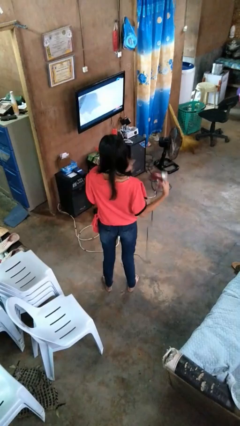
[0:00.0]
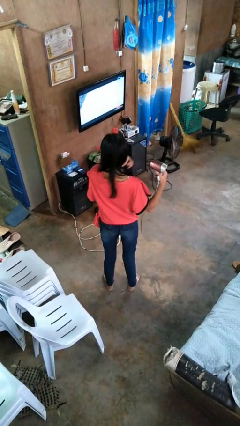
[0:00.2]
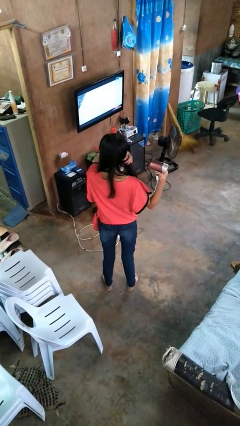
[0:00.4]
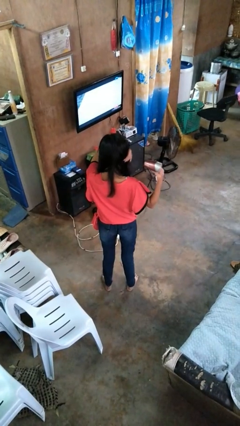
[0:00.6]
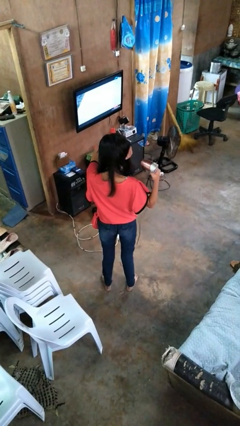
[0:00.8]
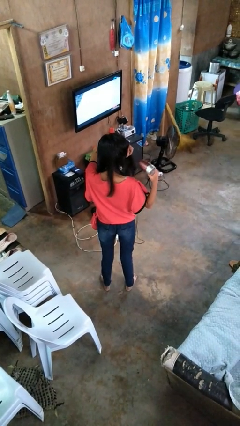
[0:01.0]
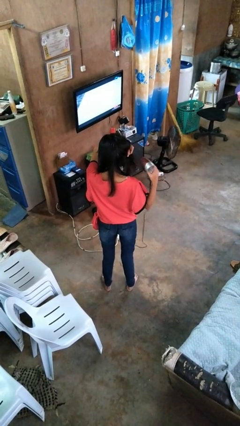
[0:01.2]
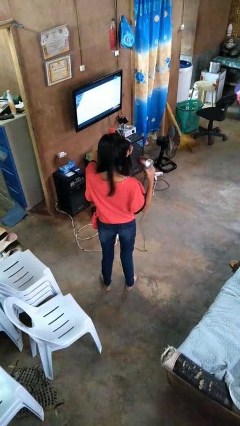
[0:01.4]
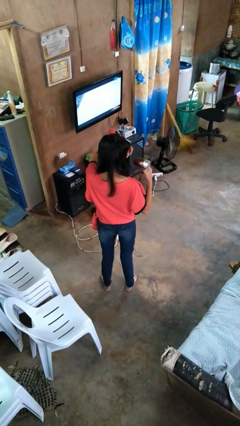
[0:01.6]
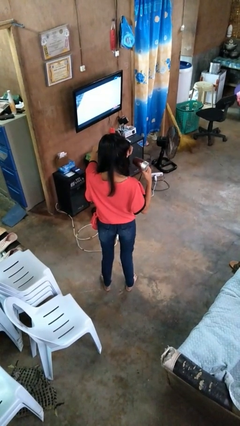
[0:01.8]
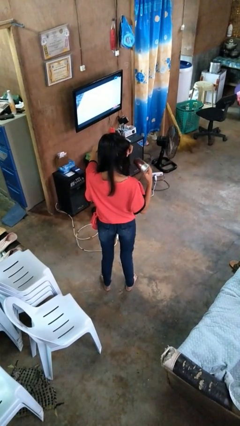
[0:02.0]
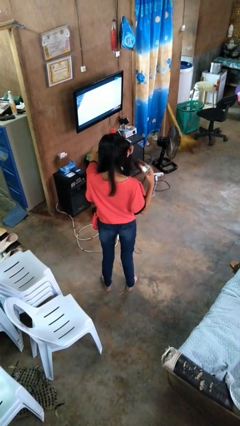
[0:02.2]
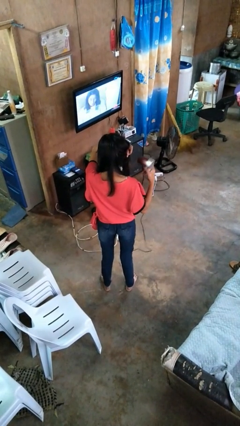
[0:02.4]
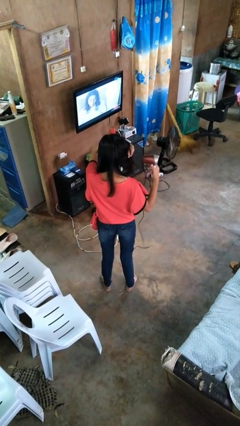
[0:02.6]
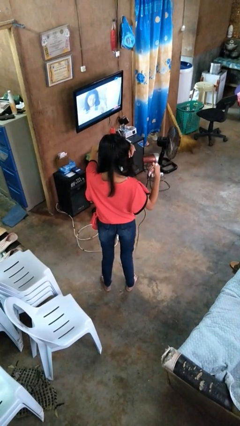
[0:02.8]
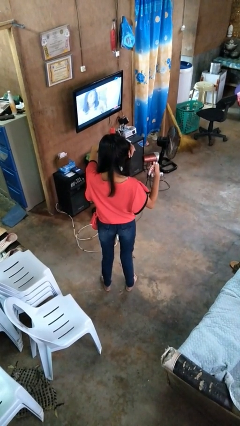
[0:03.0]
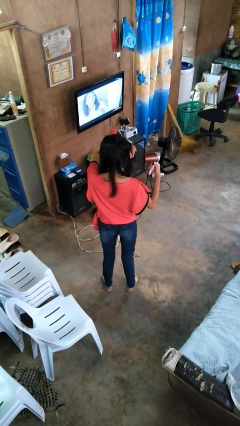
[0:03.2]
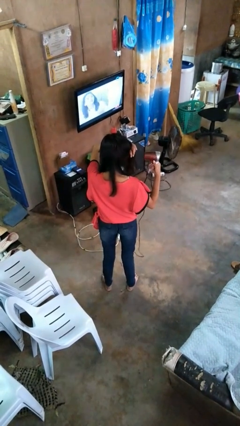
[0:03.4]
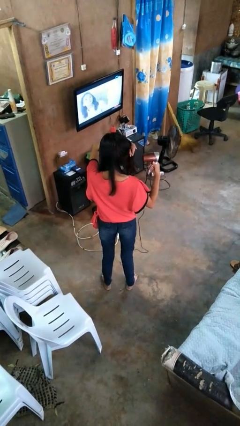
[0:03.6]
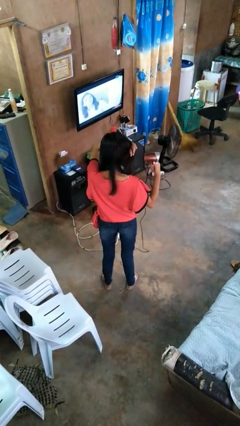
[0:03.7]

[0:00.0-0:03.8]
person dries hair with hairdryer

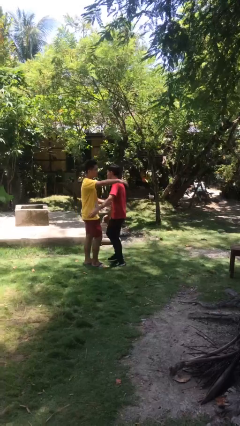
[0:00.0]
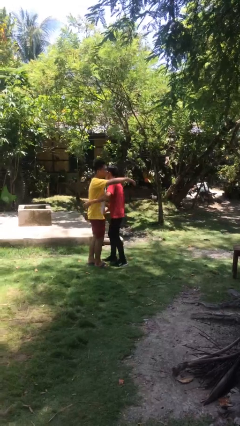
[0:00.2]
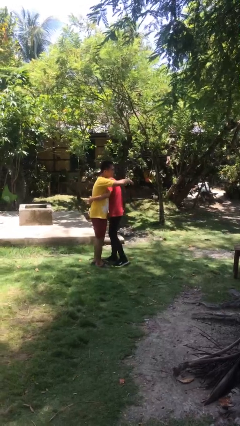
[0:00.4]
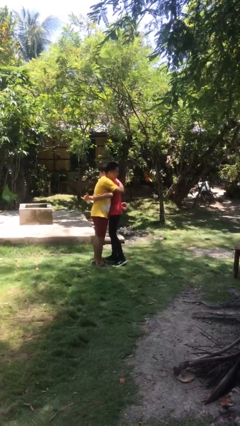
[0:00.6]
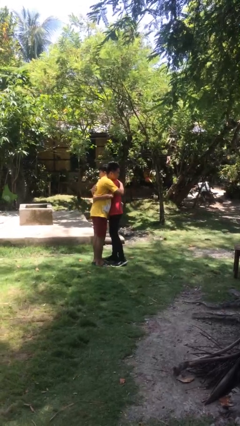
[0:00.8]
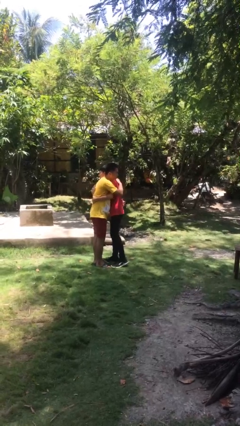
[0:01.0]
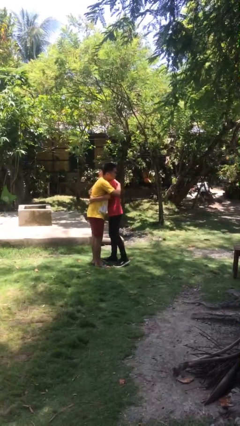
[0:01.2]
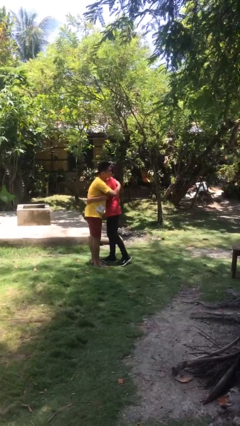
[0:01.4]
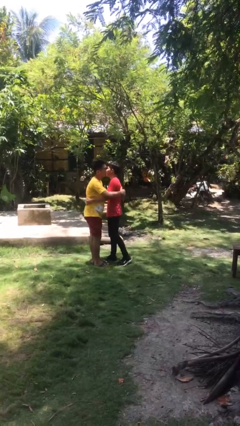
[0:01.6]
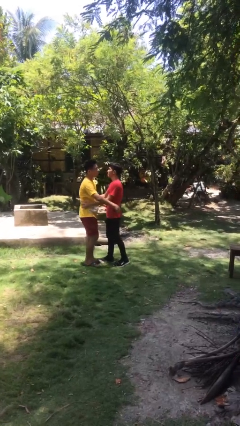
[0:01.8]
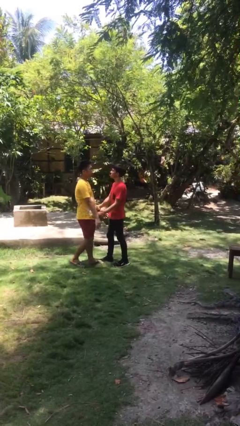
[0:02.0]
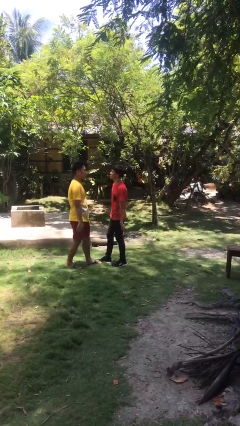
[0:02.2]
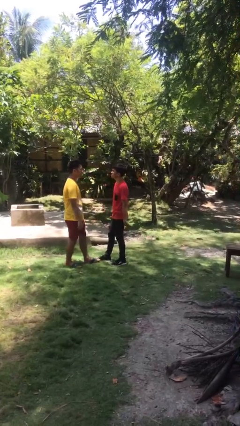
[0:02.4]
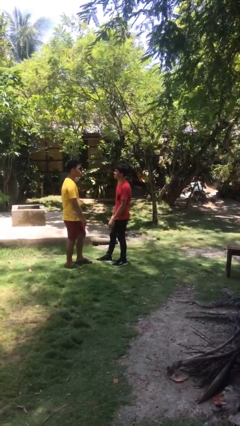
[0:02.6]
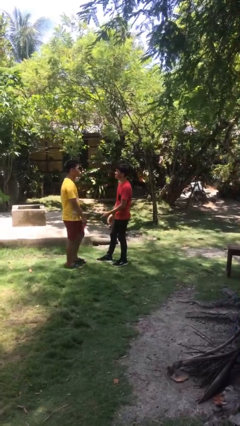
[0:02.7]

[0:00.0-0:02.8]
person embraces person

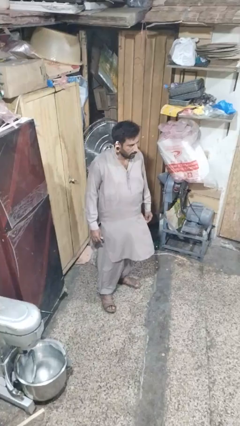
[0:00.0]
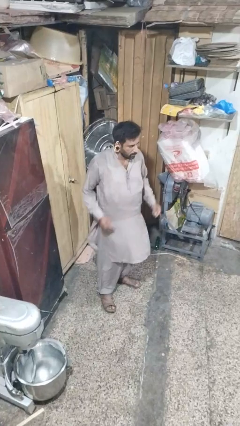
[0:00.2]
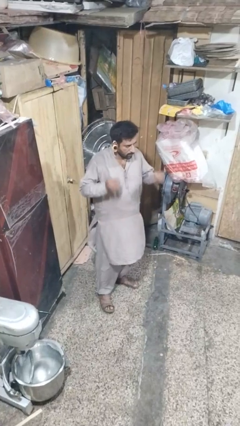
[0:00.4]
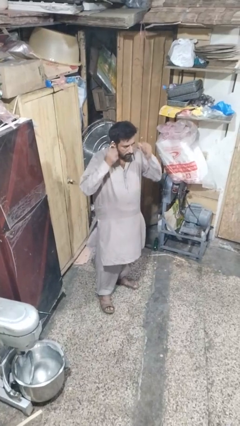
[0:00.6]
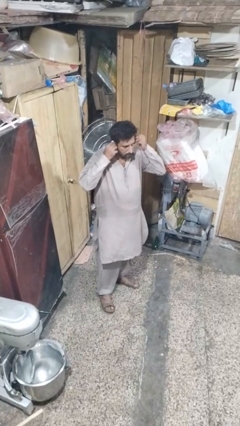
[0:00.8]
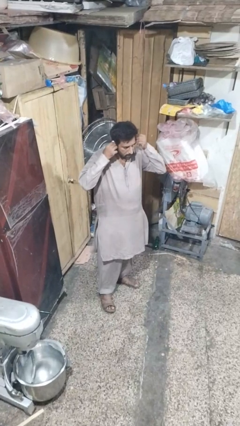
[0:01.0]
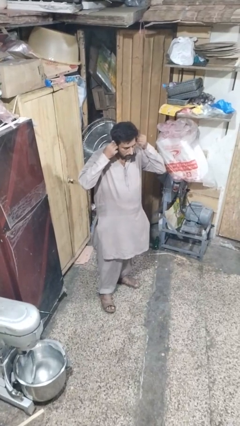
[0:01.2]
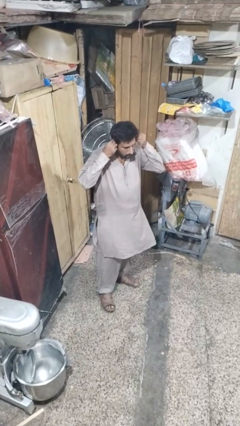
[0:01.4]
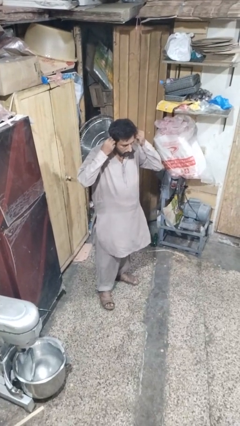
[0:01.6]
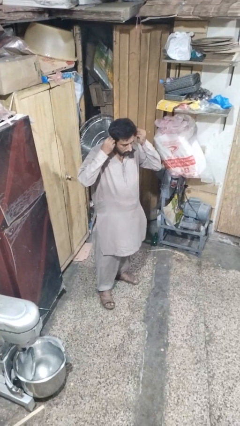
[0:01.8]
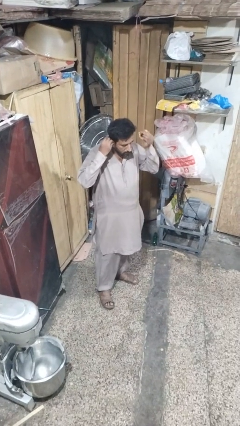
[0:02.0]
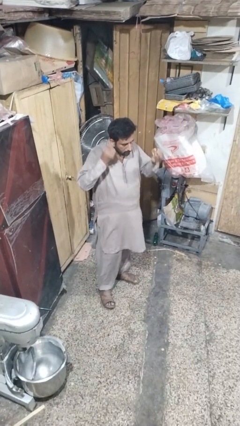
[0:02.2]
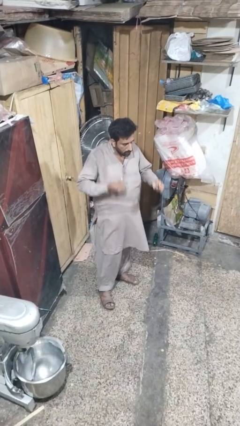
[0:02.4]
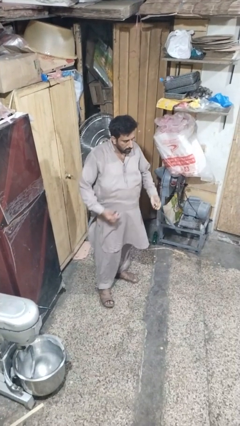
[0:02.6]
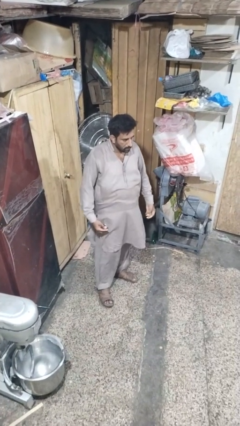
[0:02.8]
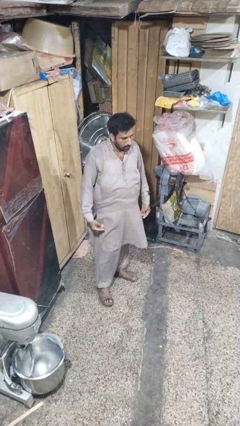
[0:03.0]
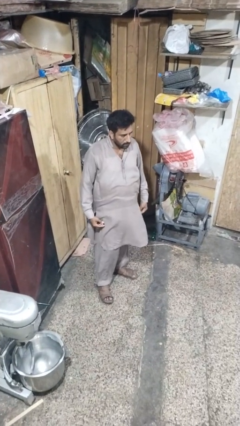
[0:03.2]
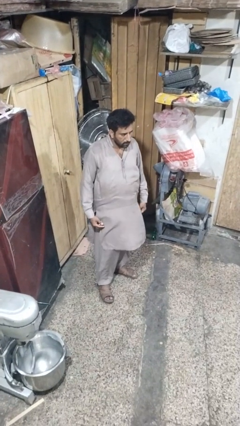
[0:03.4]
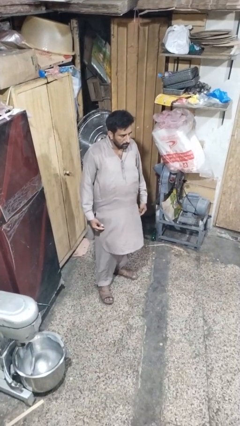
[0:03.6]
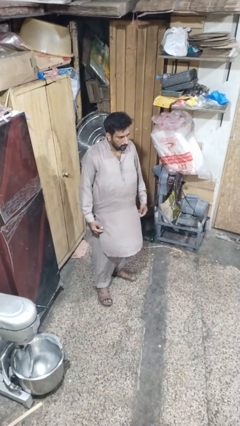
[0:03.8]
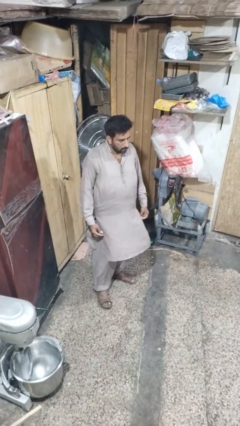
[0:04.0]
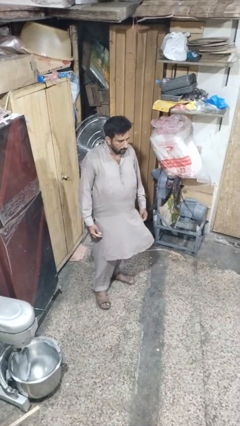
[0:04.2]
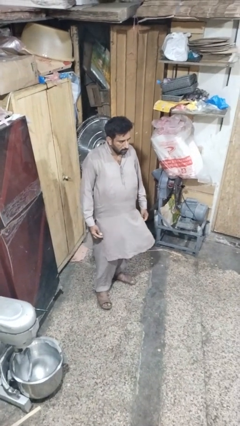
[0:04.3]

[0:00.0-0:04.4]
person takes off earrings

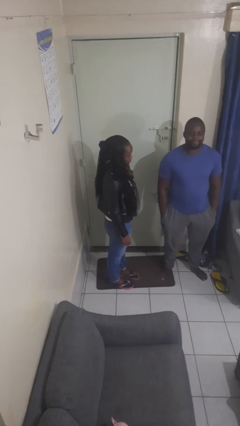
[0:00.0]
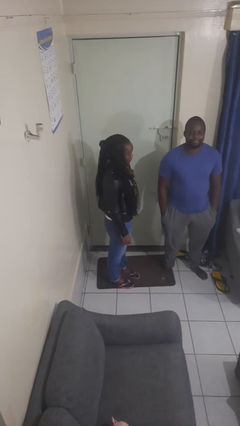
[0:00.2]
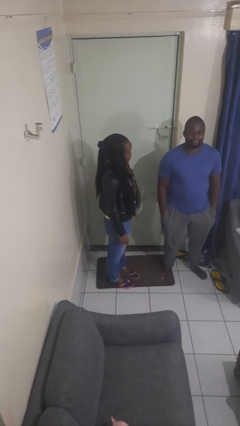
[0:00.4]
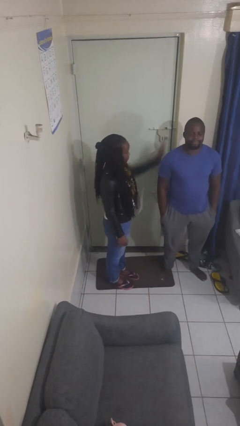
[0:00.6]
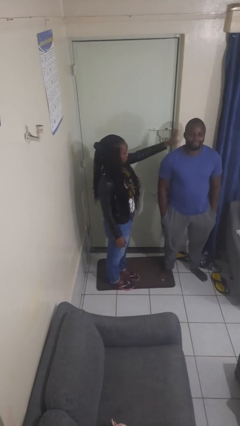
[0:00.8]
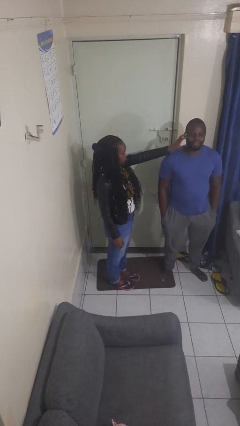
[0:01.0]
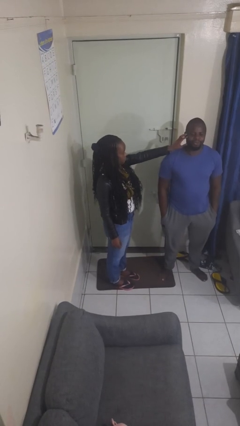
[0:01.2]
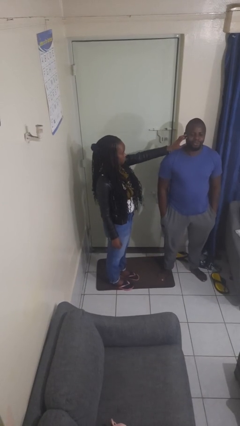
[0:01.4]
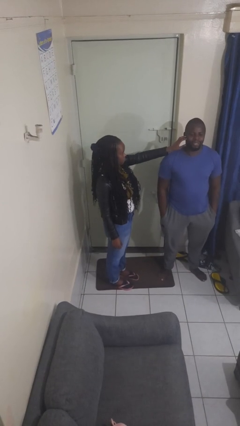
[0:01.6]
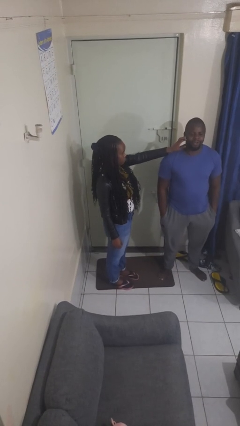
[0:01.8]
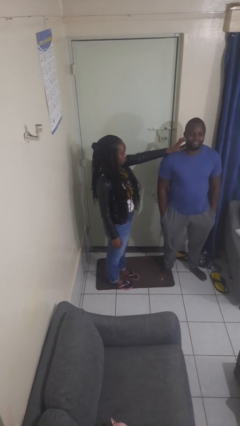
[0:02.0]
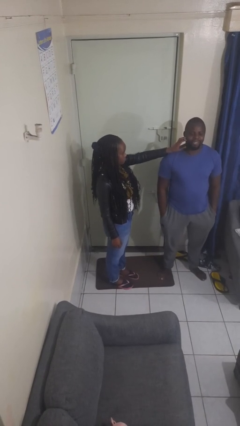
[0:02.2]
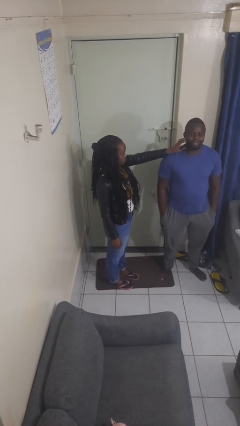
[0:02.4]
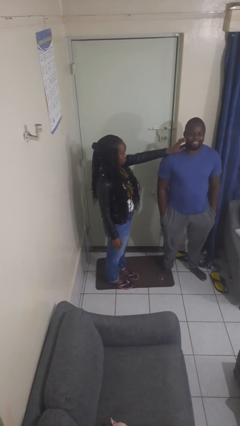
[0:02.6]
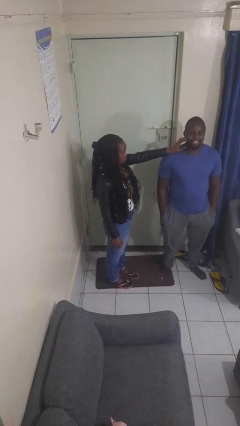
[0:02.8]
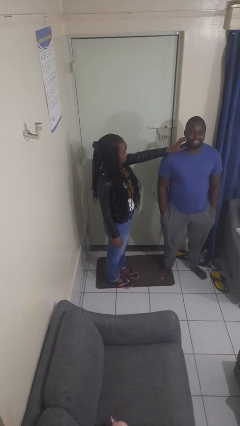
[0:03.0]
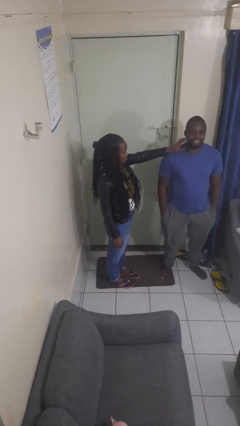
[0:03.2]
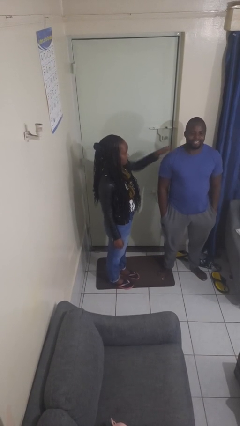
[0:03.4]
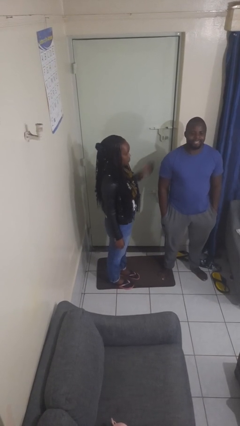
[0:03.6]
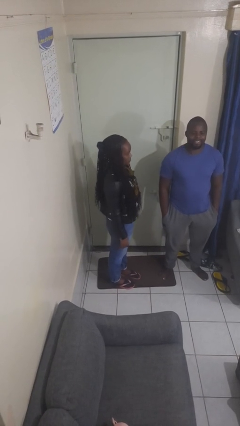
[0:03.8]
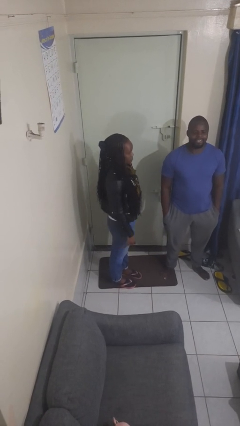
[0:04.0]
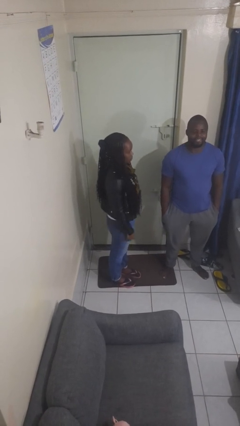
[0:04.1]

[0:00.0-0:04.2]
person touches face of person

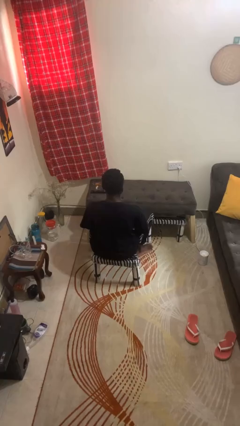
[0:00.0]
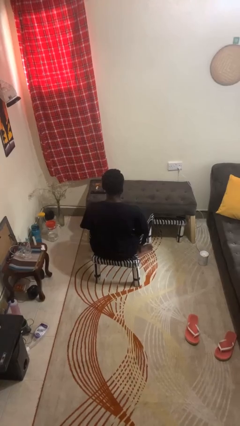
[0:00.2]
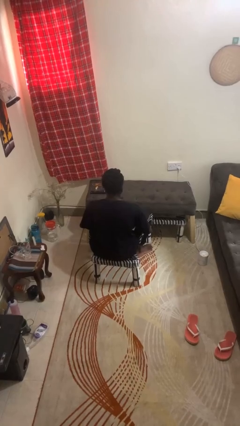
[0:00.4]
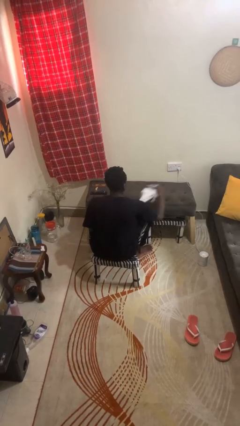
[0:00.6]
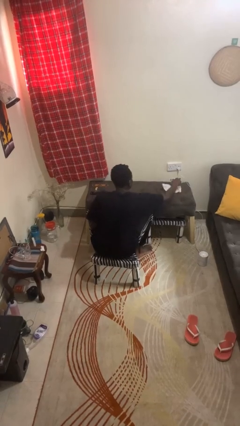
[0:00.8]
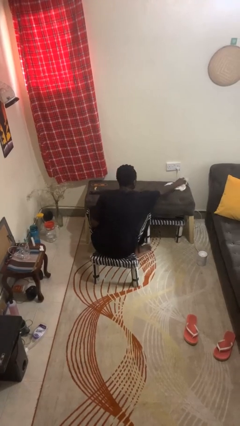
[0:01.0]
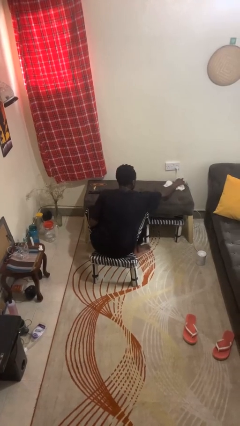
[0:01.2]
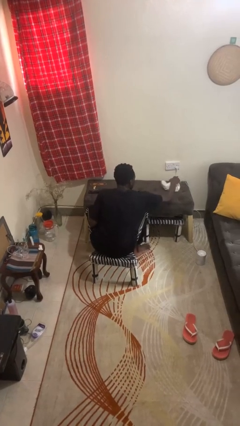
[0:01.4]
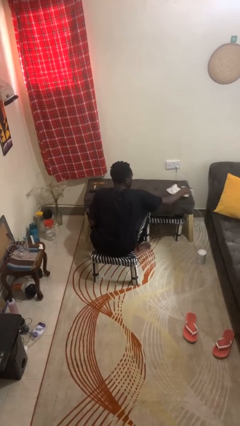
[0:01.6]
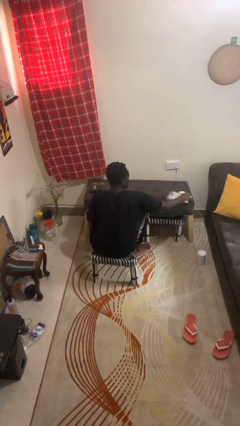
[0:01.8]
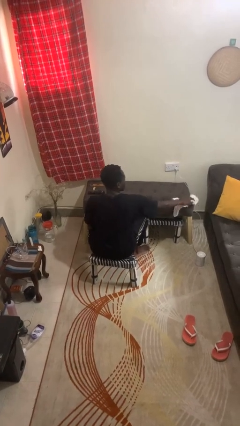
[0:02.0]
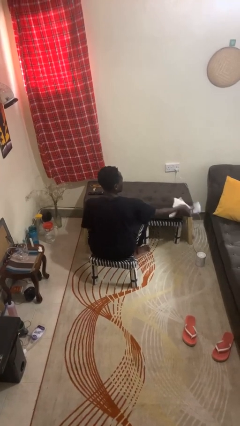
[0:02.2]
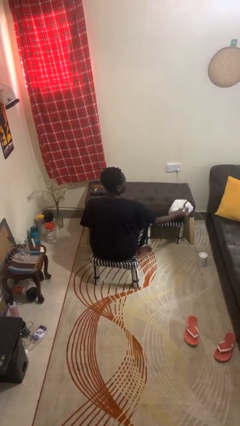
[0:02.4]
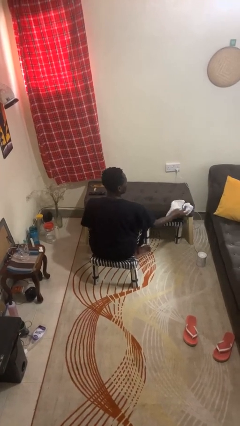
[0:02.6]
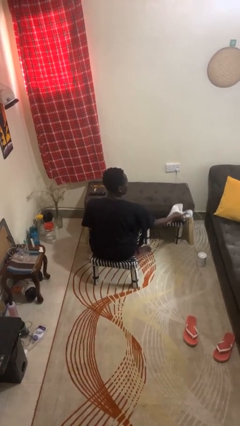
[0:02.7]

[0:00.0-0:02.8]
person cleans table with rag
